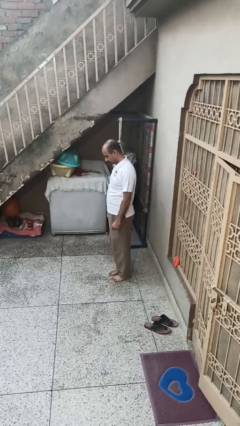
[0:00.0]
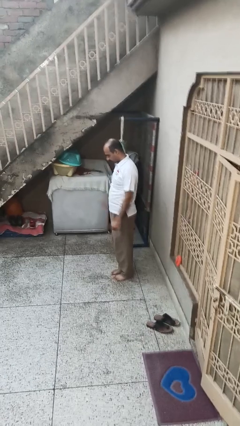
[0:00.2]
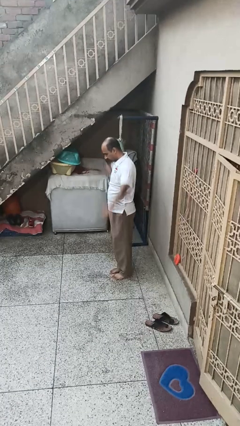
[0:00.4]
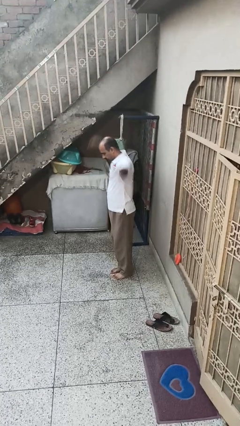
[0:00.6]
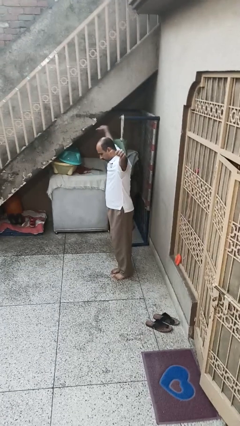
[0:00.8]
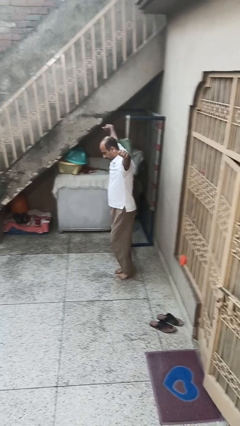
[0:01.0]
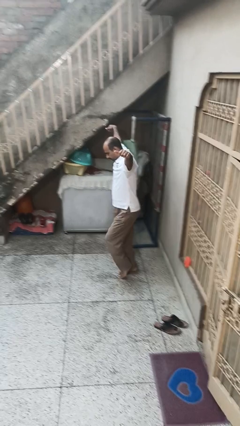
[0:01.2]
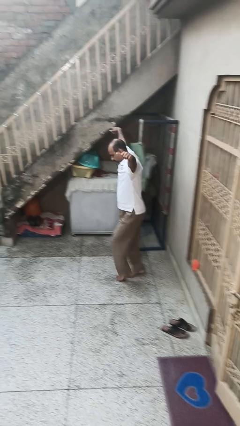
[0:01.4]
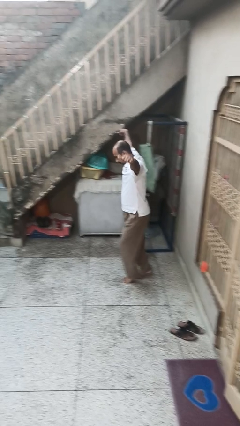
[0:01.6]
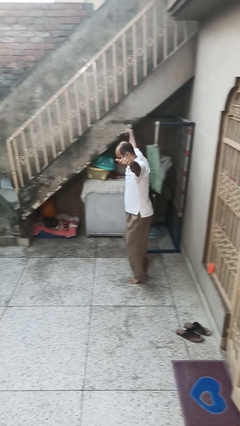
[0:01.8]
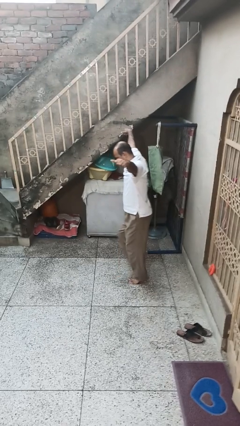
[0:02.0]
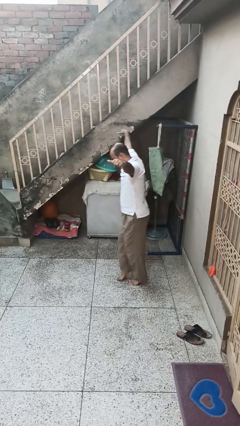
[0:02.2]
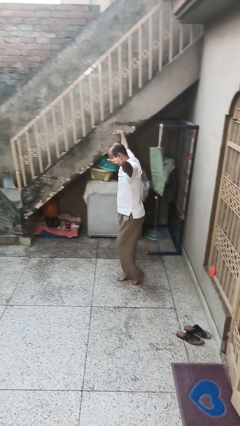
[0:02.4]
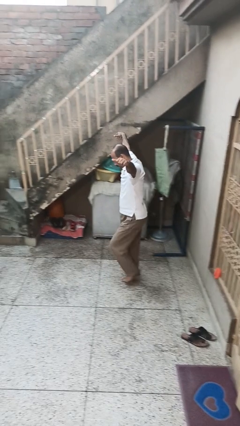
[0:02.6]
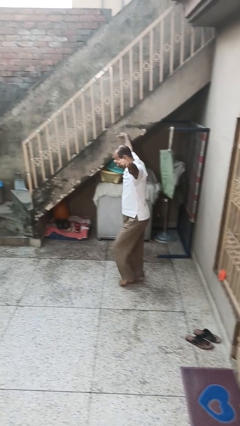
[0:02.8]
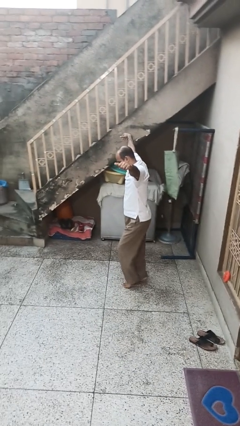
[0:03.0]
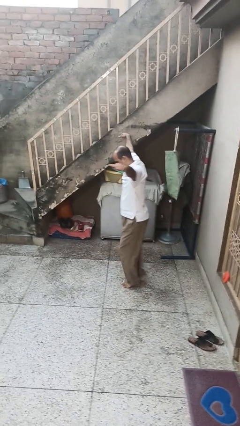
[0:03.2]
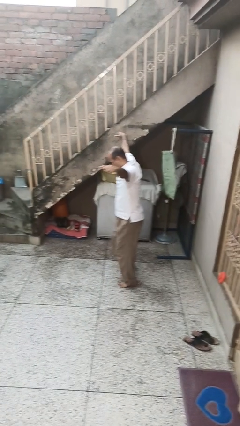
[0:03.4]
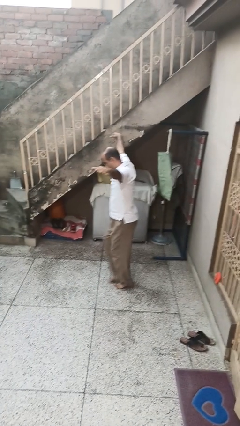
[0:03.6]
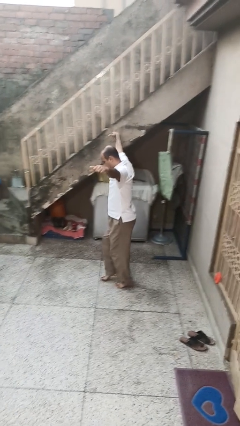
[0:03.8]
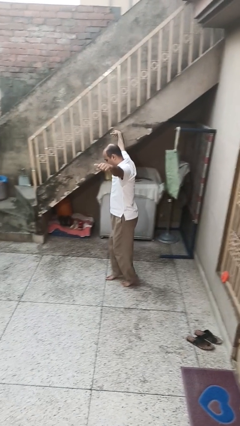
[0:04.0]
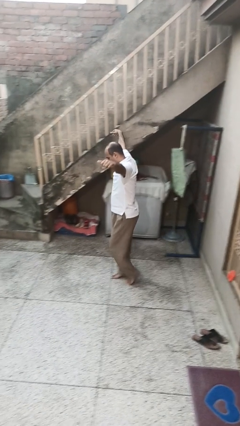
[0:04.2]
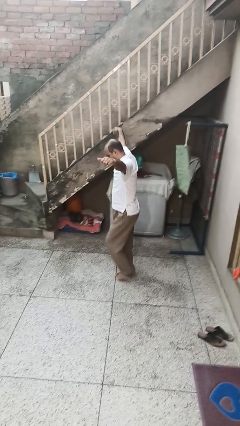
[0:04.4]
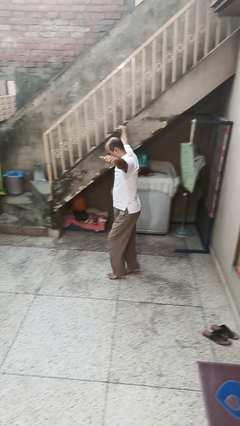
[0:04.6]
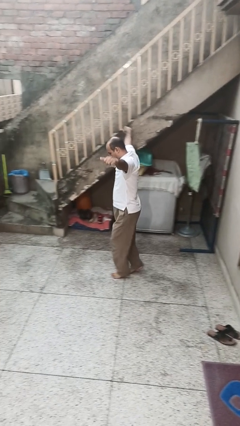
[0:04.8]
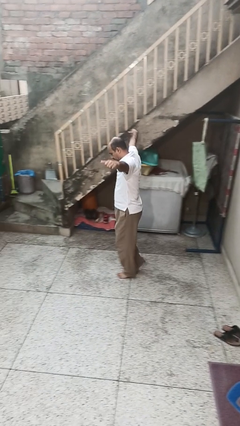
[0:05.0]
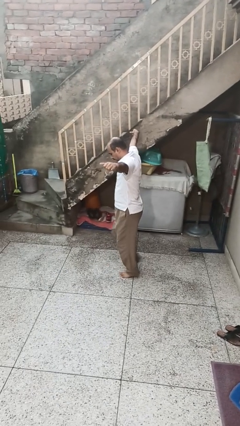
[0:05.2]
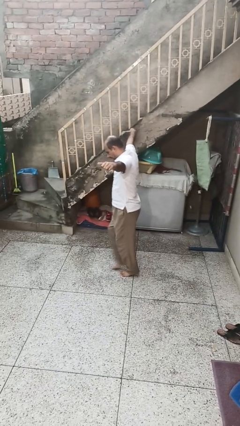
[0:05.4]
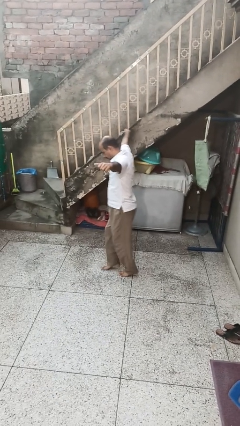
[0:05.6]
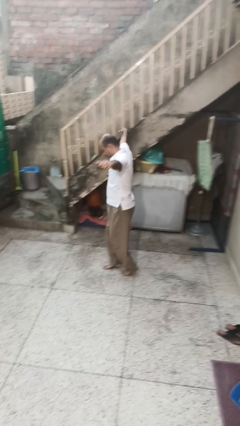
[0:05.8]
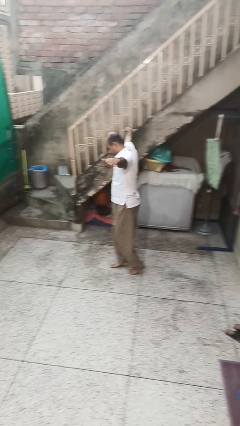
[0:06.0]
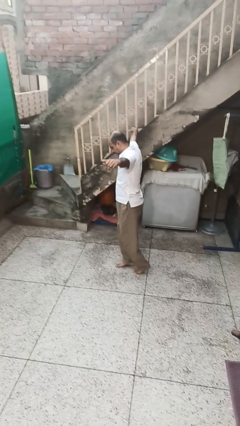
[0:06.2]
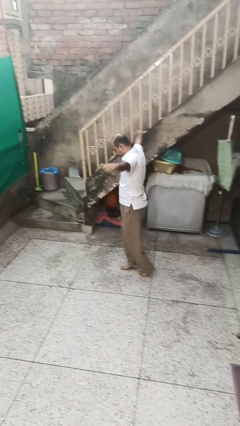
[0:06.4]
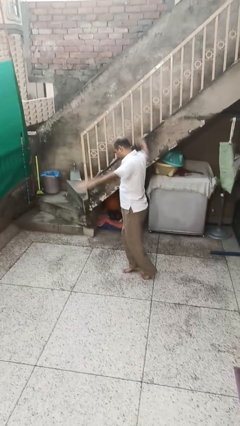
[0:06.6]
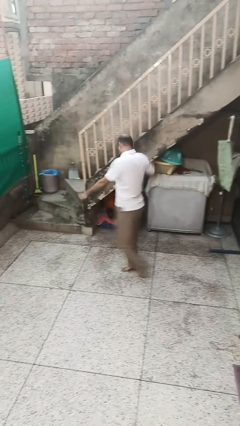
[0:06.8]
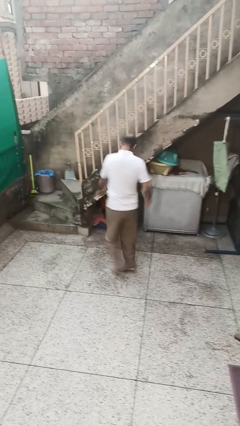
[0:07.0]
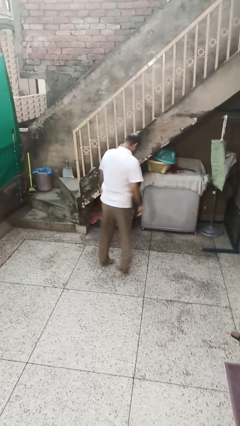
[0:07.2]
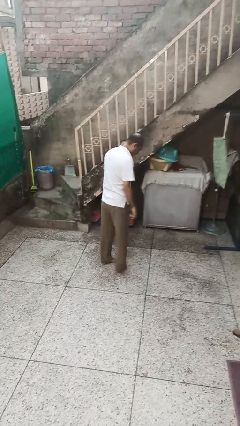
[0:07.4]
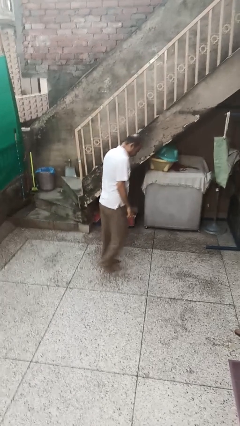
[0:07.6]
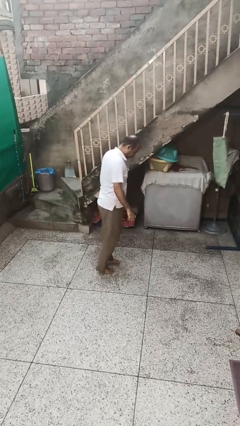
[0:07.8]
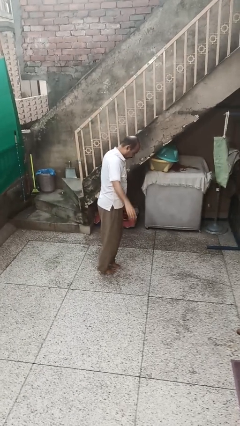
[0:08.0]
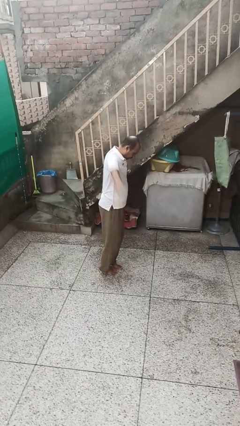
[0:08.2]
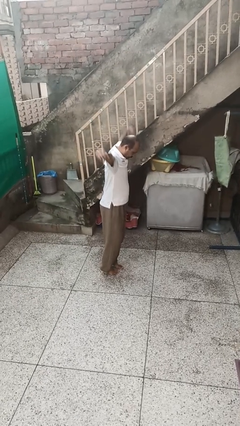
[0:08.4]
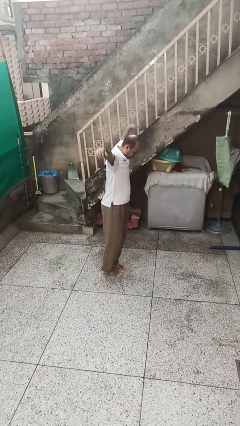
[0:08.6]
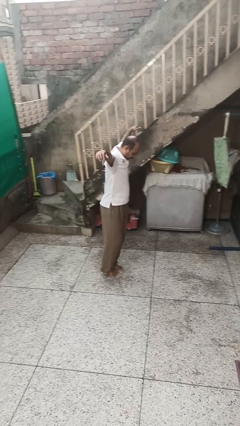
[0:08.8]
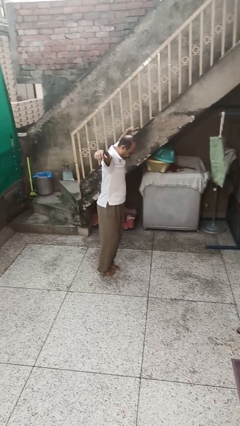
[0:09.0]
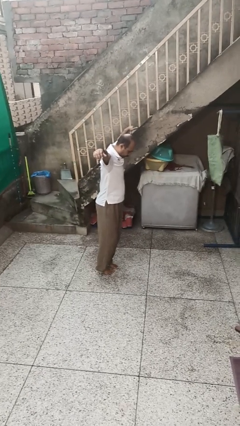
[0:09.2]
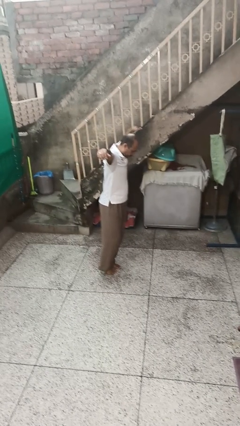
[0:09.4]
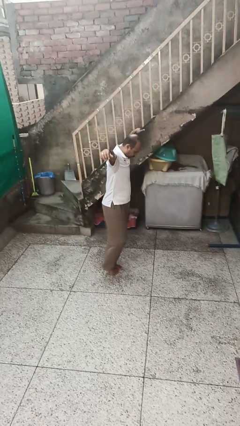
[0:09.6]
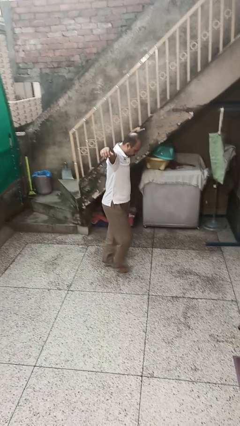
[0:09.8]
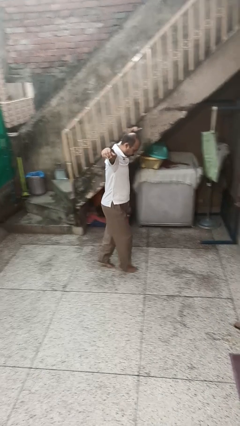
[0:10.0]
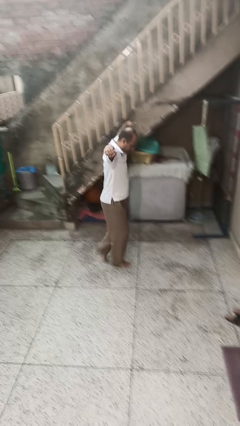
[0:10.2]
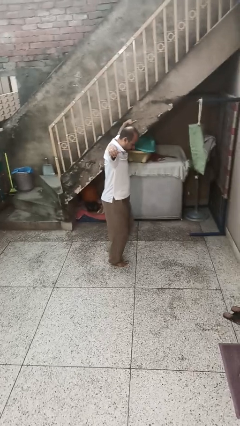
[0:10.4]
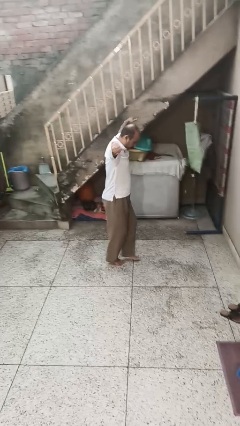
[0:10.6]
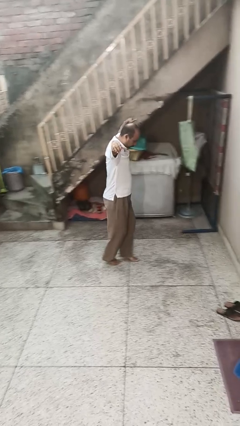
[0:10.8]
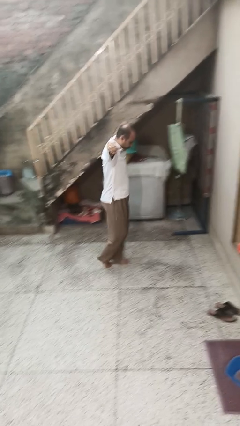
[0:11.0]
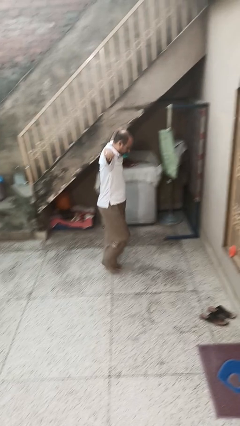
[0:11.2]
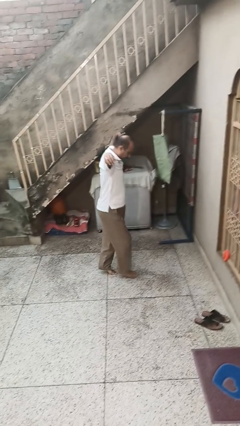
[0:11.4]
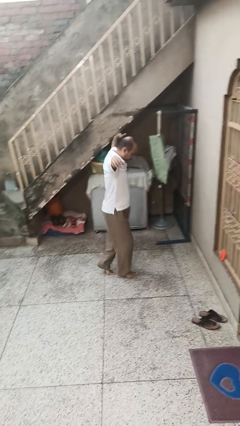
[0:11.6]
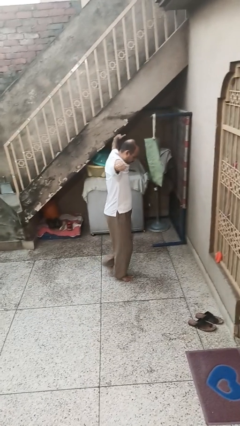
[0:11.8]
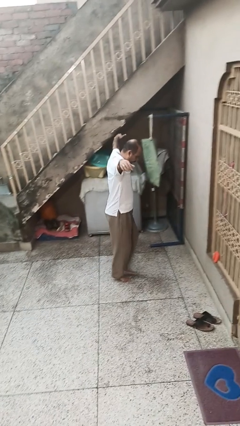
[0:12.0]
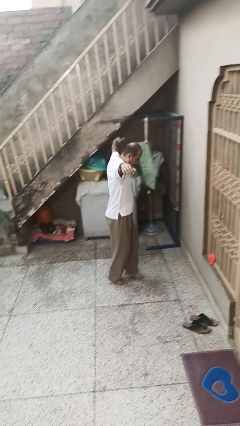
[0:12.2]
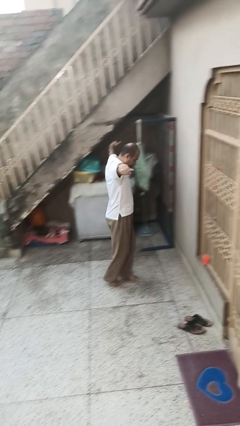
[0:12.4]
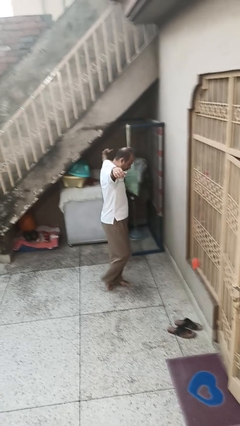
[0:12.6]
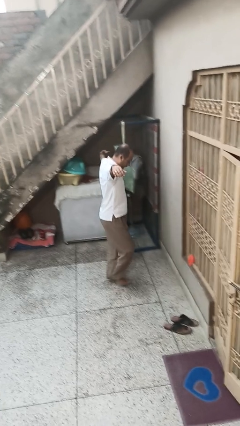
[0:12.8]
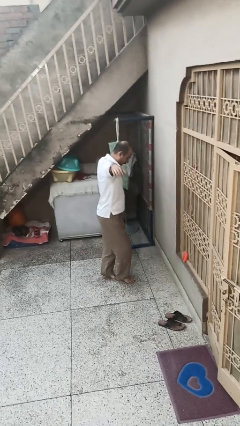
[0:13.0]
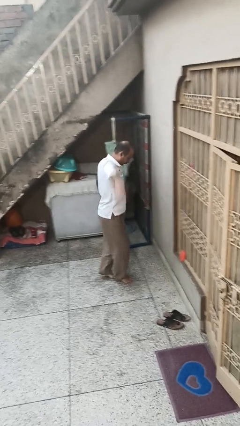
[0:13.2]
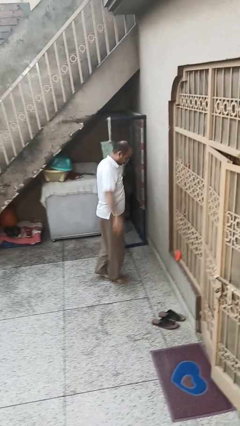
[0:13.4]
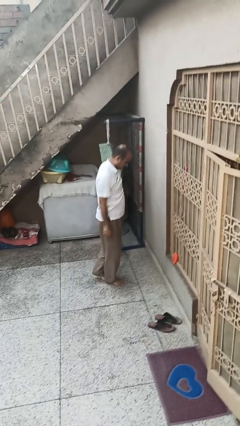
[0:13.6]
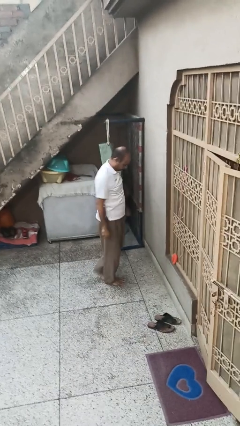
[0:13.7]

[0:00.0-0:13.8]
person walks tiptoe

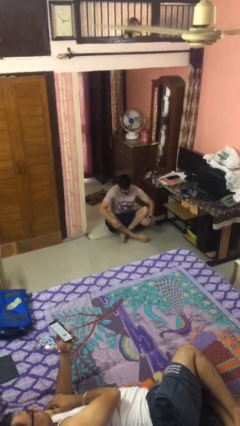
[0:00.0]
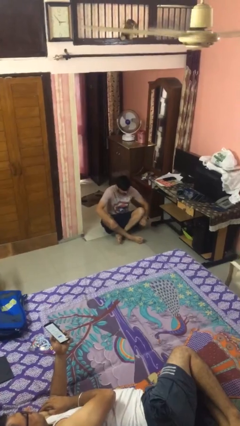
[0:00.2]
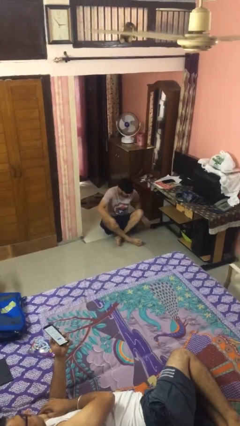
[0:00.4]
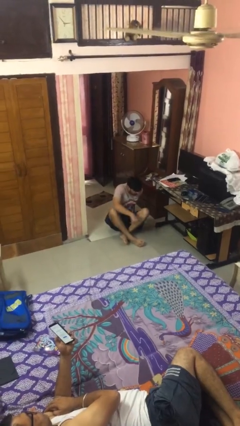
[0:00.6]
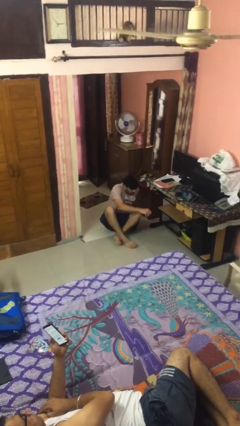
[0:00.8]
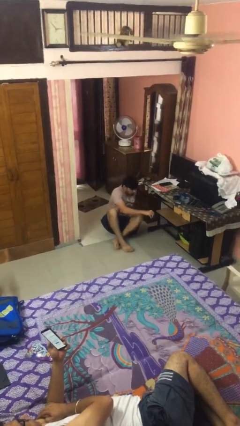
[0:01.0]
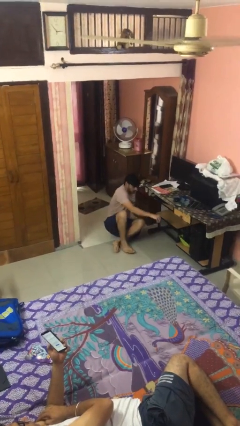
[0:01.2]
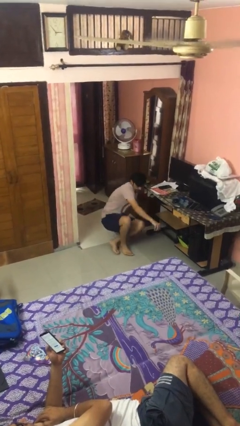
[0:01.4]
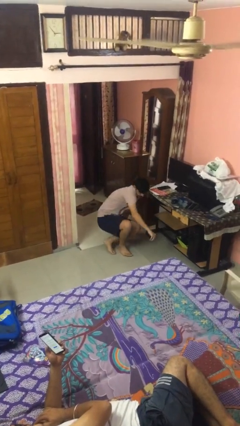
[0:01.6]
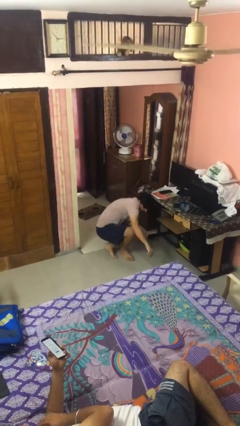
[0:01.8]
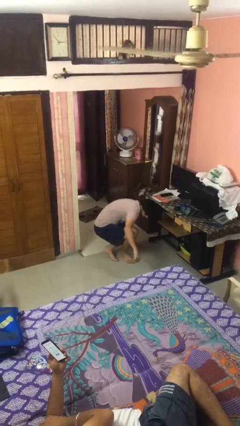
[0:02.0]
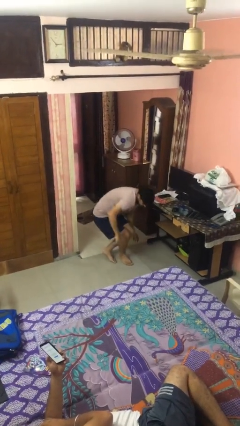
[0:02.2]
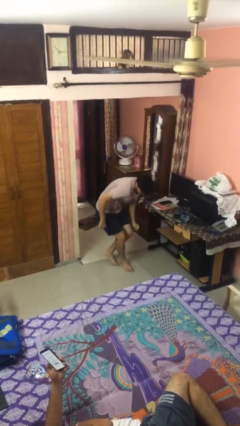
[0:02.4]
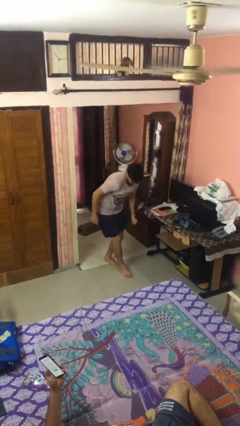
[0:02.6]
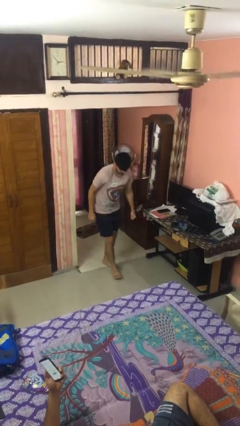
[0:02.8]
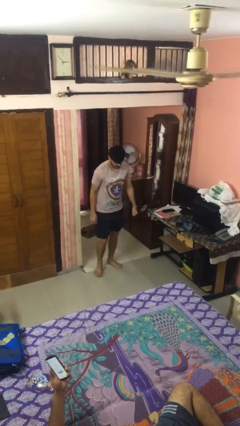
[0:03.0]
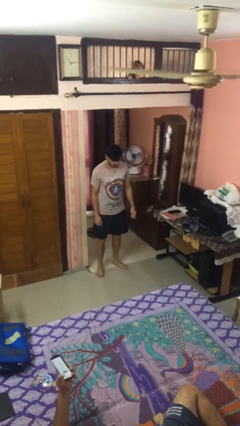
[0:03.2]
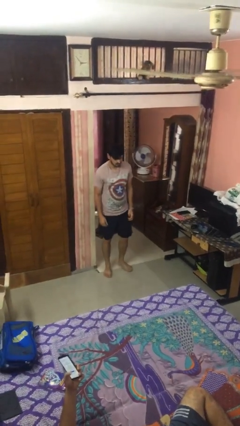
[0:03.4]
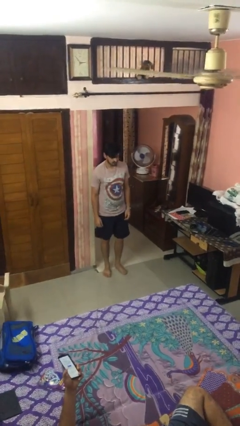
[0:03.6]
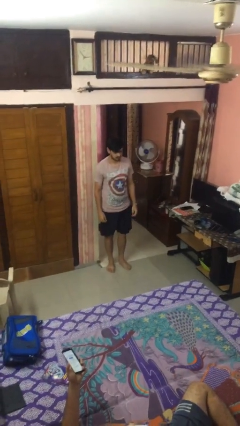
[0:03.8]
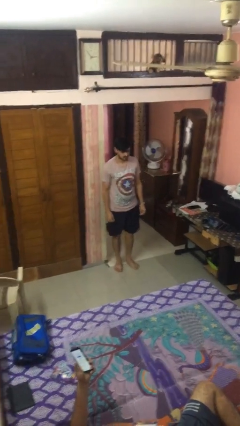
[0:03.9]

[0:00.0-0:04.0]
person stands up from floor

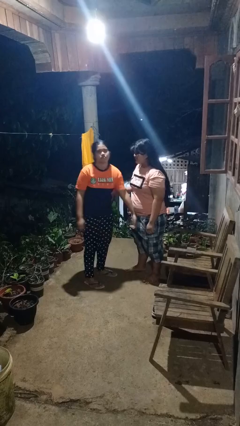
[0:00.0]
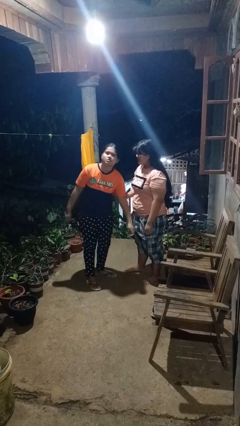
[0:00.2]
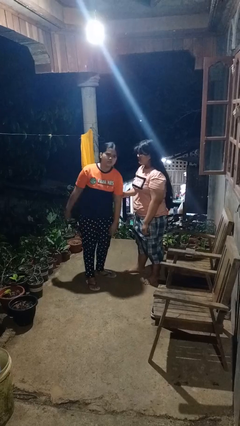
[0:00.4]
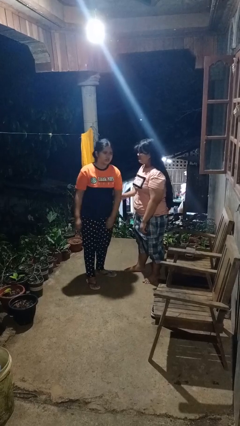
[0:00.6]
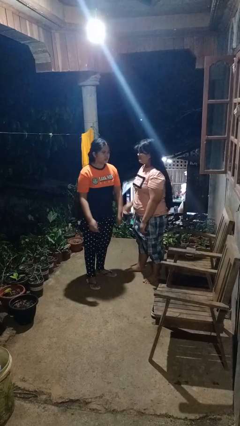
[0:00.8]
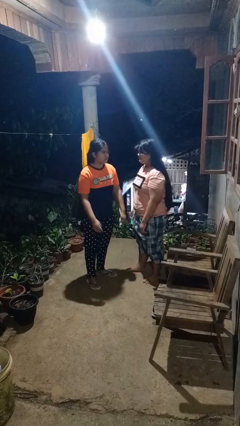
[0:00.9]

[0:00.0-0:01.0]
person grabs person by bicep
